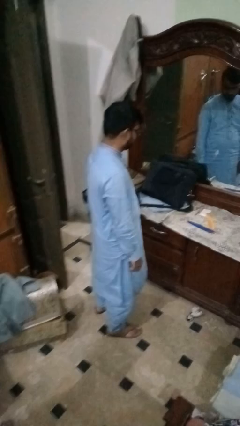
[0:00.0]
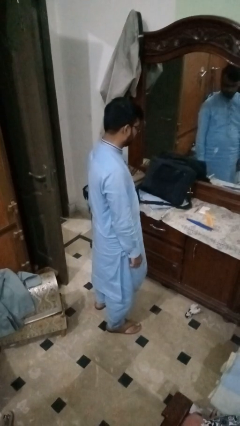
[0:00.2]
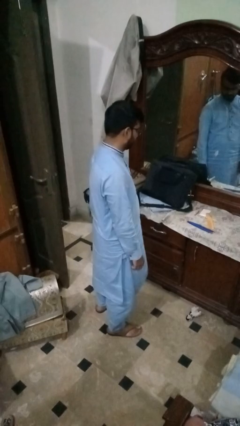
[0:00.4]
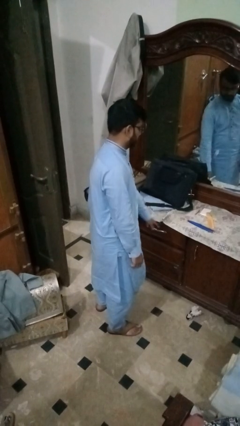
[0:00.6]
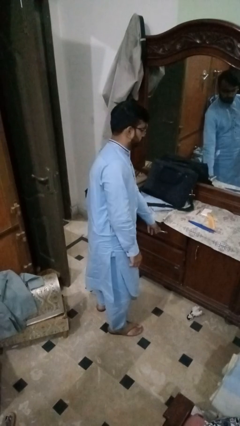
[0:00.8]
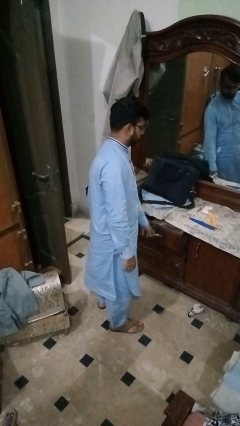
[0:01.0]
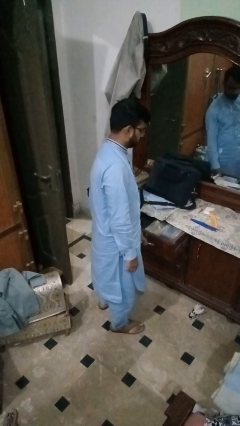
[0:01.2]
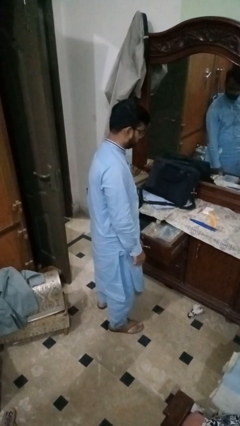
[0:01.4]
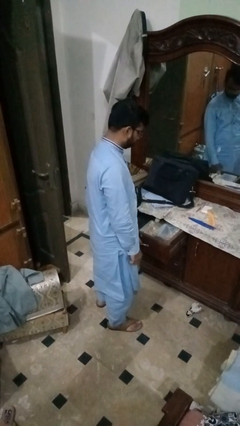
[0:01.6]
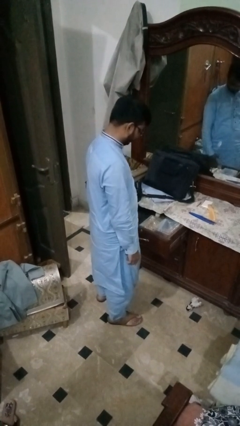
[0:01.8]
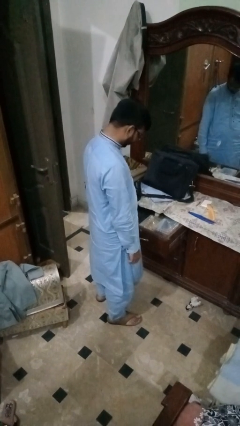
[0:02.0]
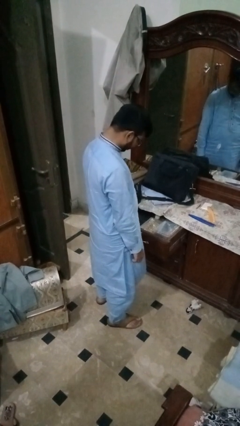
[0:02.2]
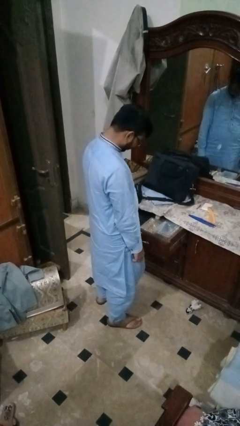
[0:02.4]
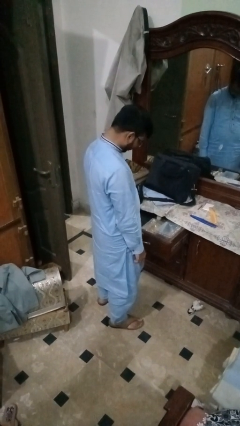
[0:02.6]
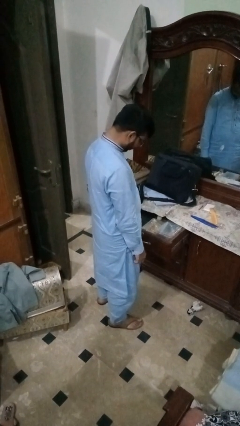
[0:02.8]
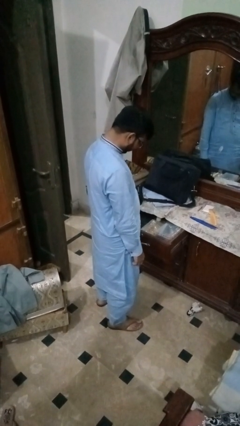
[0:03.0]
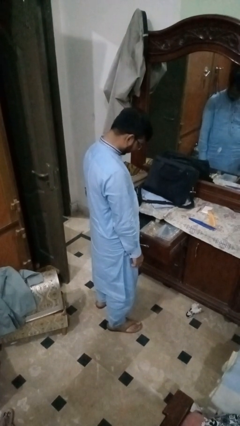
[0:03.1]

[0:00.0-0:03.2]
person opens dresser drawer

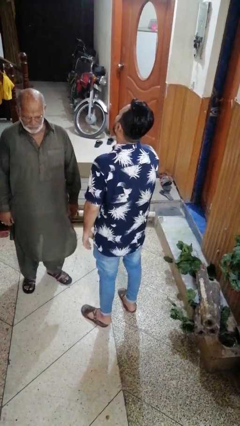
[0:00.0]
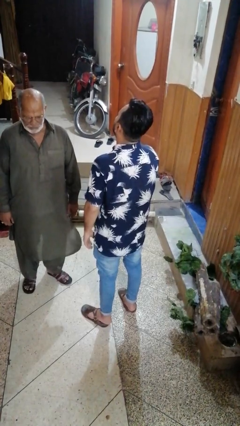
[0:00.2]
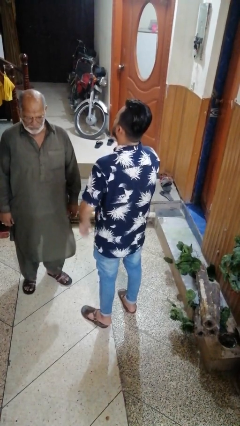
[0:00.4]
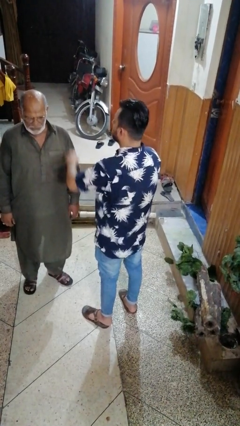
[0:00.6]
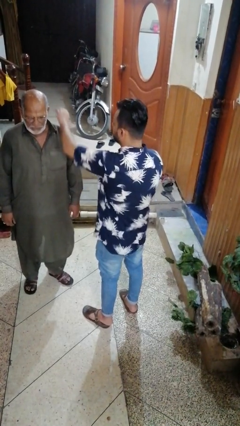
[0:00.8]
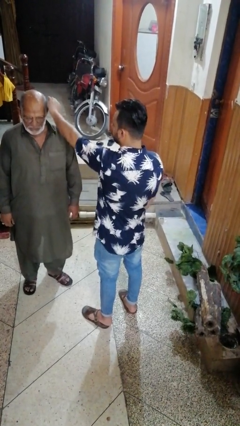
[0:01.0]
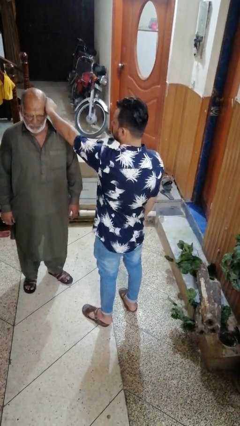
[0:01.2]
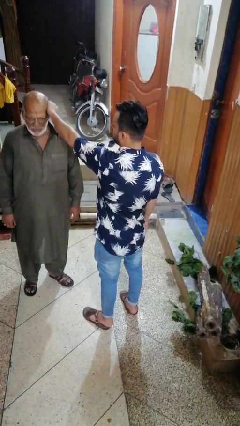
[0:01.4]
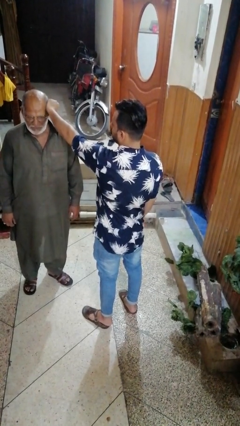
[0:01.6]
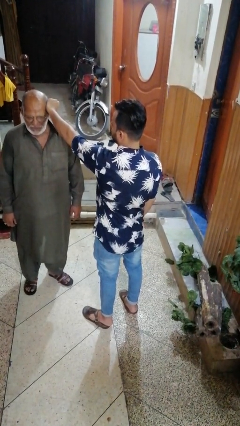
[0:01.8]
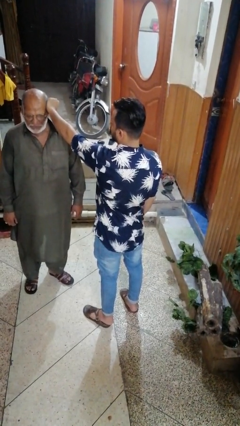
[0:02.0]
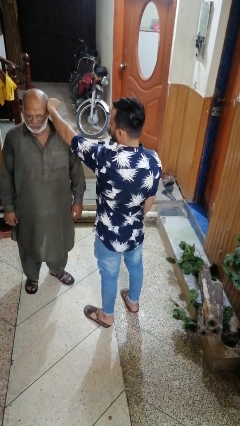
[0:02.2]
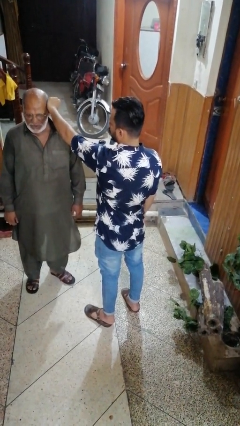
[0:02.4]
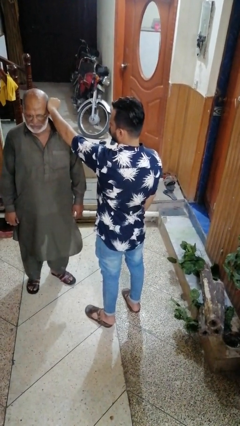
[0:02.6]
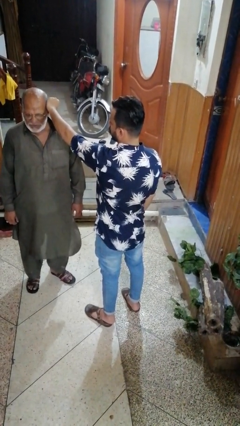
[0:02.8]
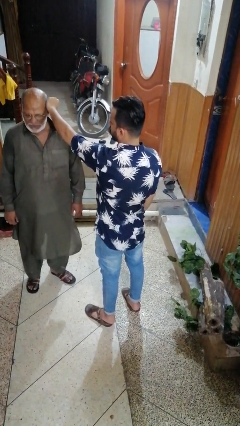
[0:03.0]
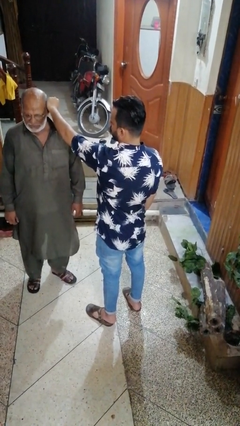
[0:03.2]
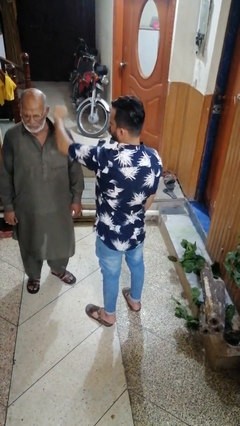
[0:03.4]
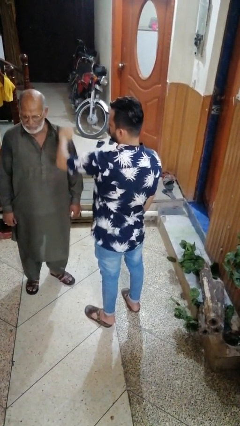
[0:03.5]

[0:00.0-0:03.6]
person grabs person by hair

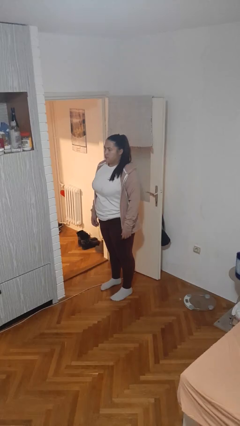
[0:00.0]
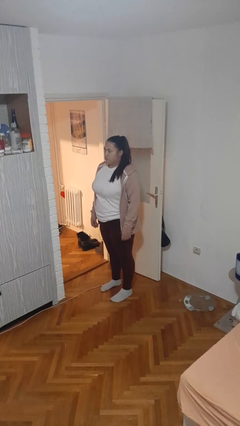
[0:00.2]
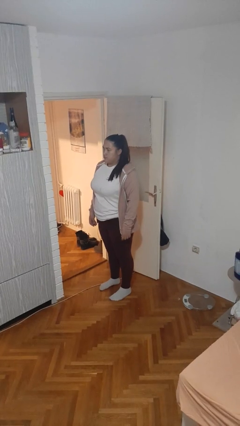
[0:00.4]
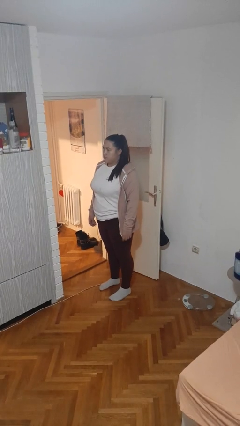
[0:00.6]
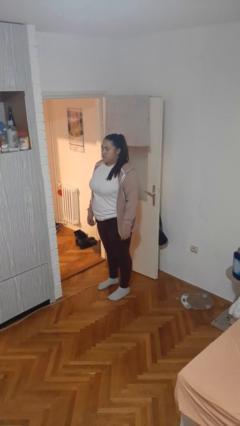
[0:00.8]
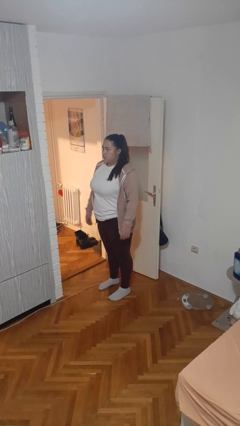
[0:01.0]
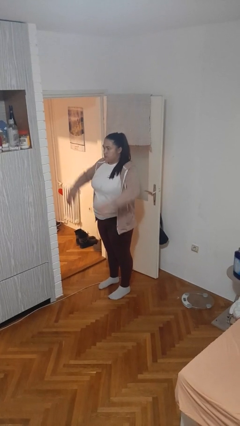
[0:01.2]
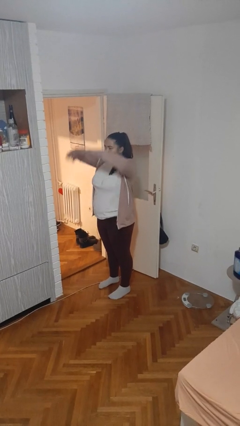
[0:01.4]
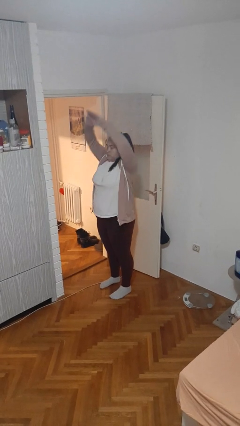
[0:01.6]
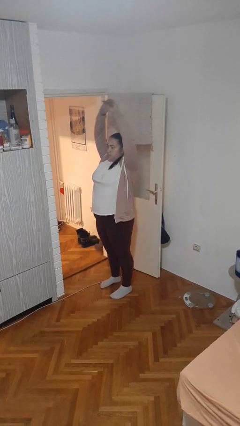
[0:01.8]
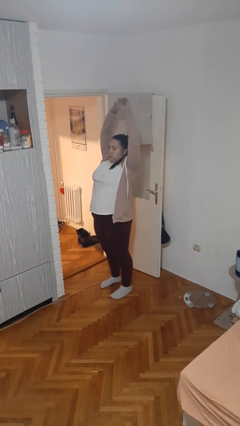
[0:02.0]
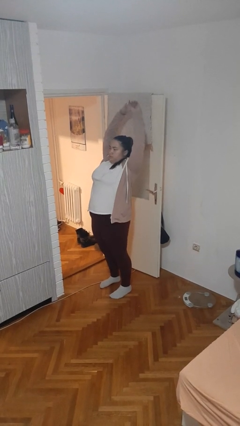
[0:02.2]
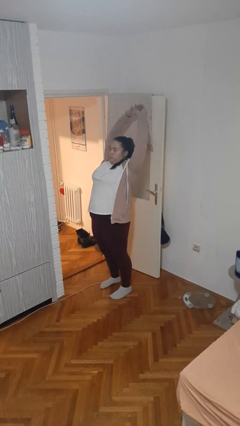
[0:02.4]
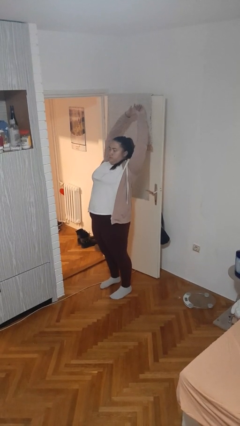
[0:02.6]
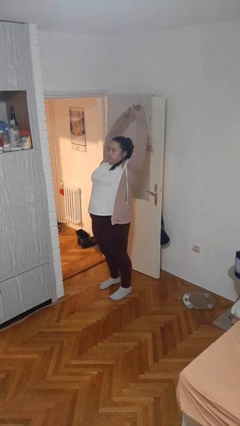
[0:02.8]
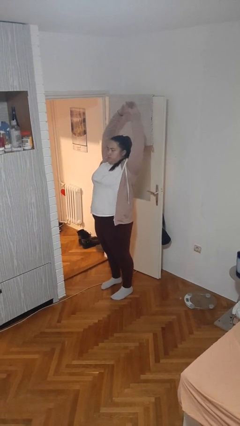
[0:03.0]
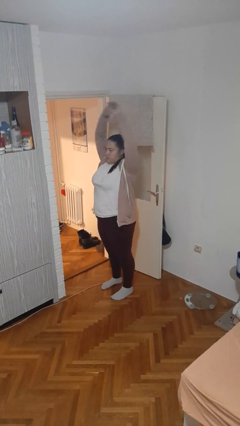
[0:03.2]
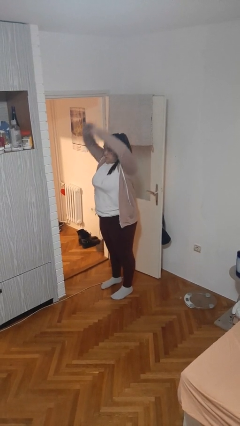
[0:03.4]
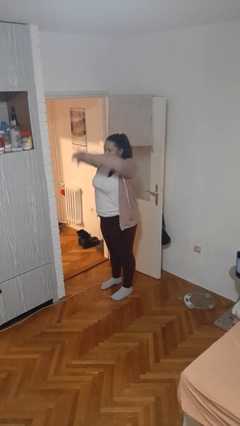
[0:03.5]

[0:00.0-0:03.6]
person stretches arms over head

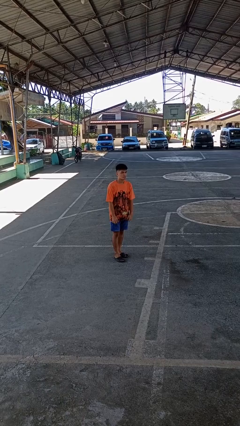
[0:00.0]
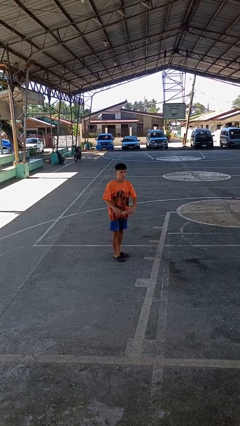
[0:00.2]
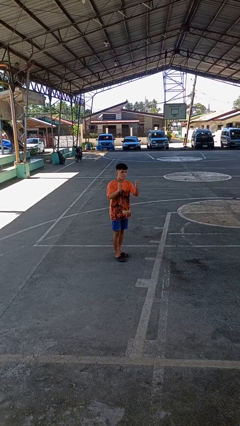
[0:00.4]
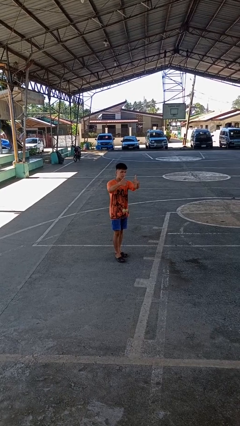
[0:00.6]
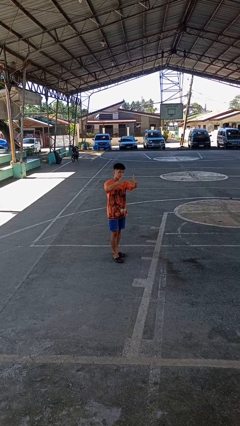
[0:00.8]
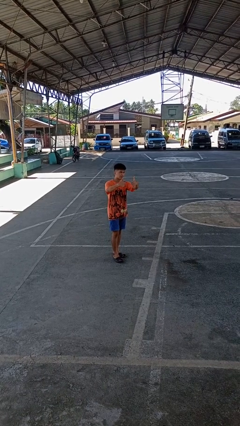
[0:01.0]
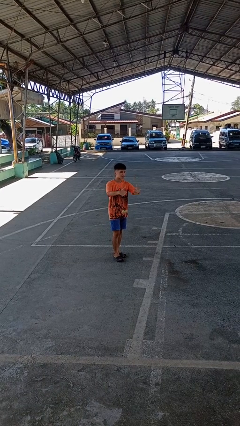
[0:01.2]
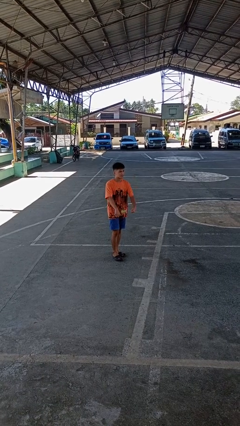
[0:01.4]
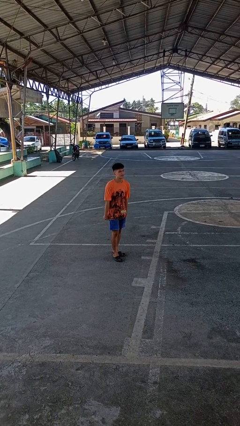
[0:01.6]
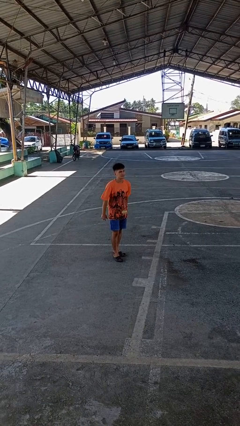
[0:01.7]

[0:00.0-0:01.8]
person gestures thumbs up

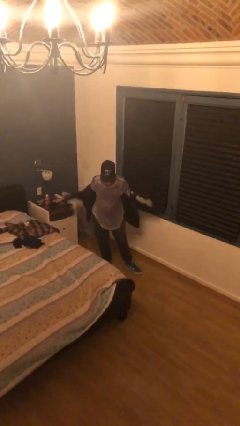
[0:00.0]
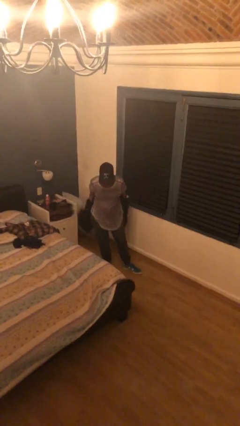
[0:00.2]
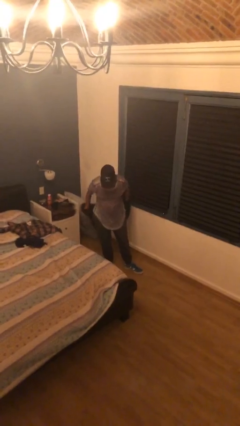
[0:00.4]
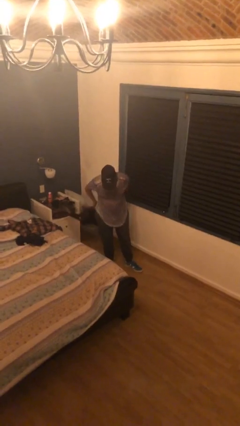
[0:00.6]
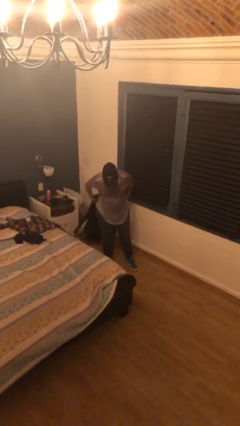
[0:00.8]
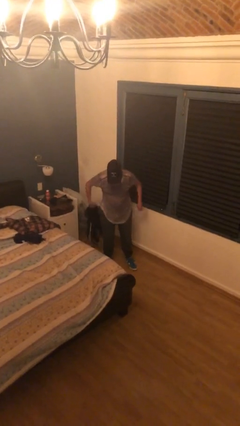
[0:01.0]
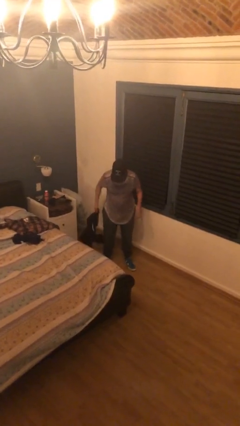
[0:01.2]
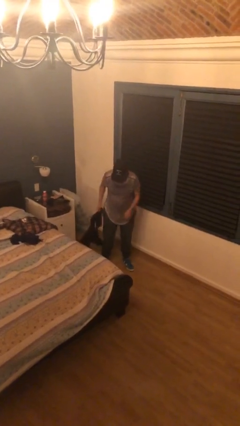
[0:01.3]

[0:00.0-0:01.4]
person takes off jacket

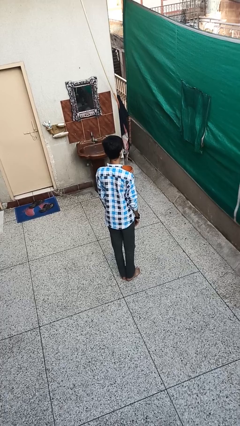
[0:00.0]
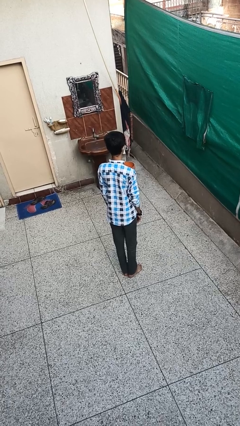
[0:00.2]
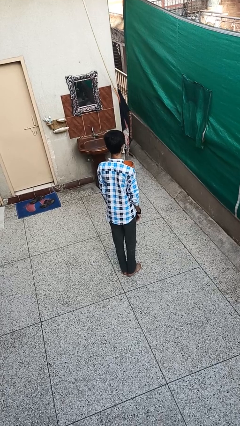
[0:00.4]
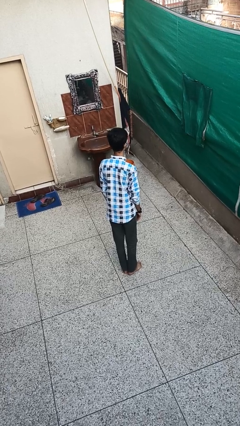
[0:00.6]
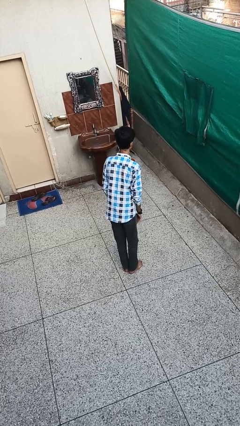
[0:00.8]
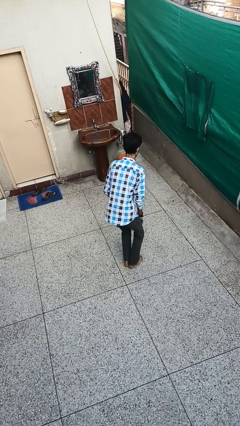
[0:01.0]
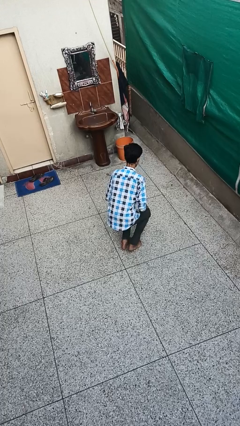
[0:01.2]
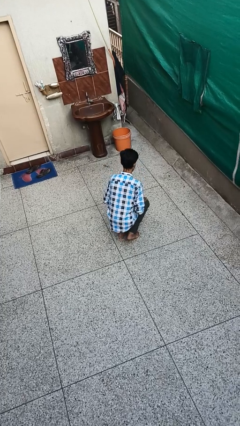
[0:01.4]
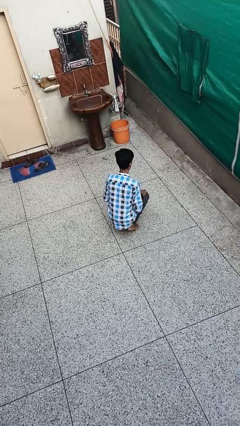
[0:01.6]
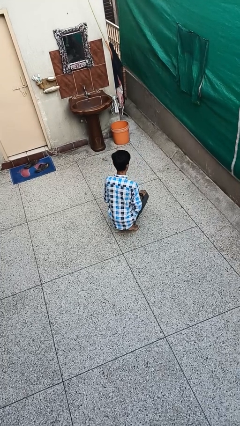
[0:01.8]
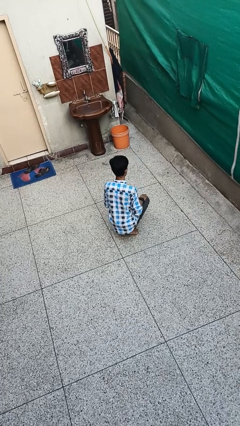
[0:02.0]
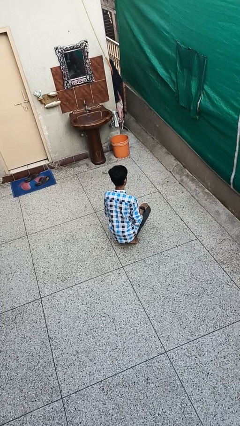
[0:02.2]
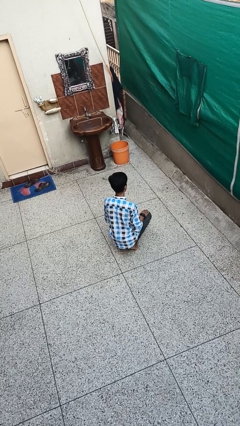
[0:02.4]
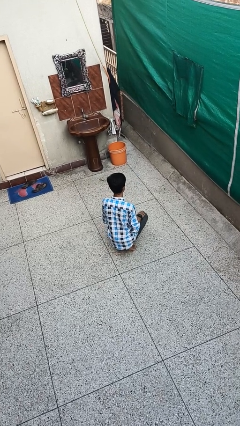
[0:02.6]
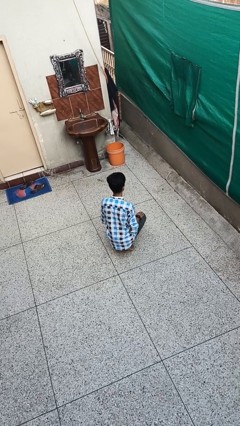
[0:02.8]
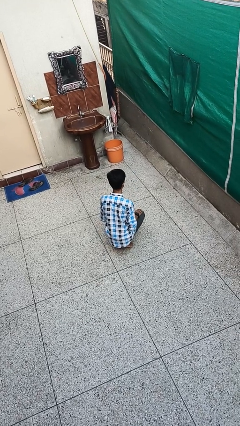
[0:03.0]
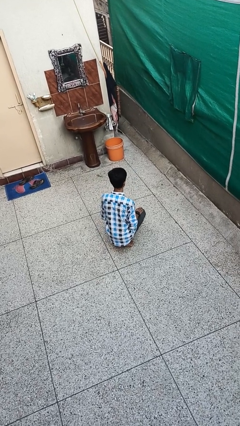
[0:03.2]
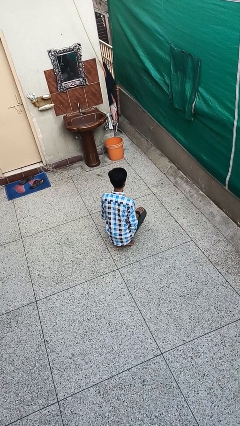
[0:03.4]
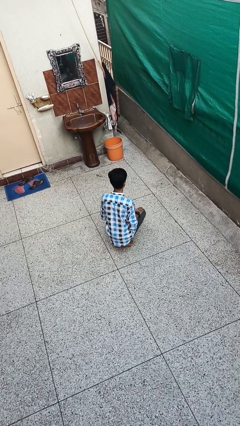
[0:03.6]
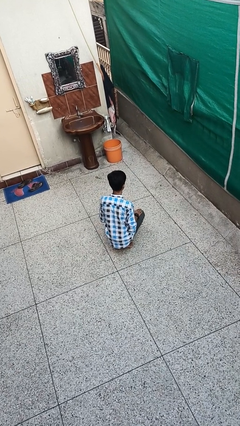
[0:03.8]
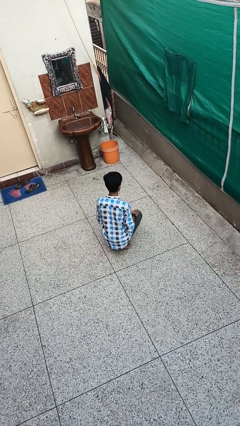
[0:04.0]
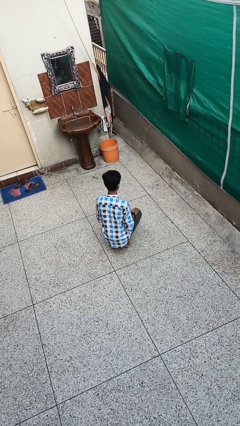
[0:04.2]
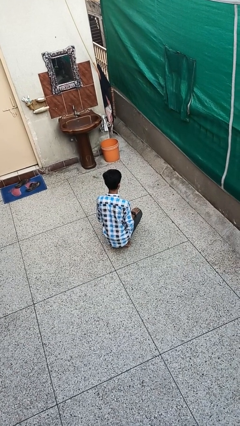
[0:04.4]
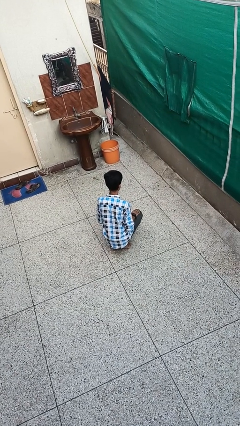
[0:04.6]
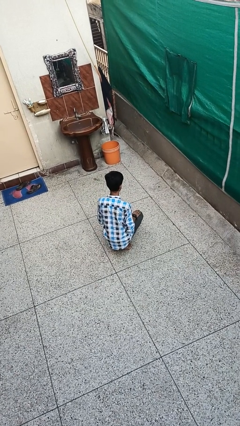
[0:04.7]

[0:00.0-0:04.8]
person squats
